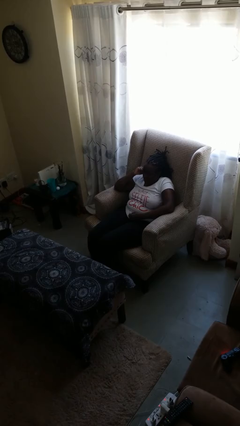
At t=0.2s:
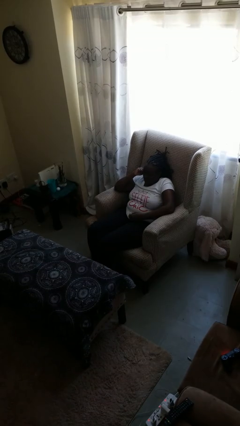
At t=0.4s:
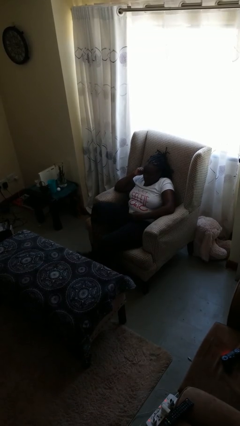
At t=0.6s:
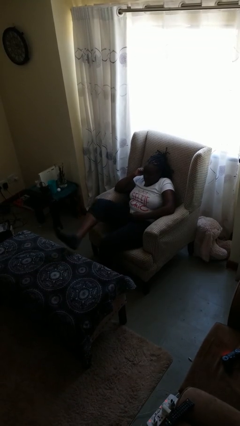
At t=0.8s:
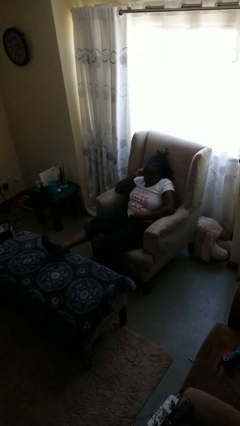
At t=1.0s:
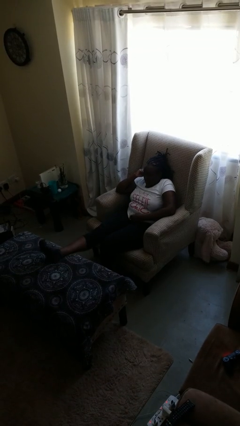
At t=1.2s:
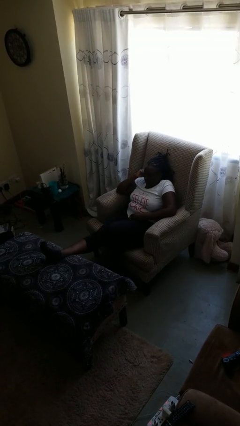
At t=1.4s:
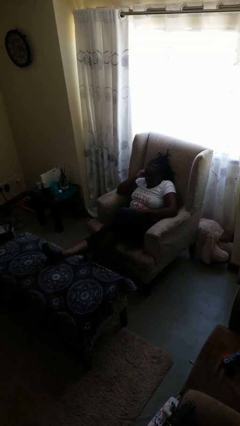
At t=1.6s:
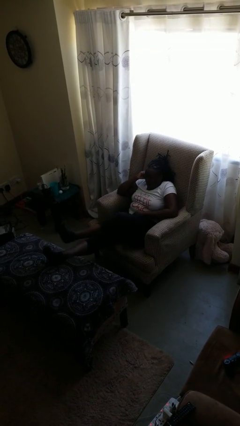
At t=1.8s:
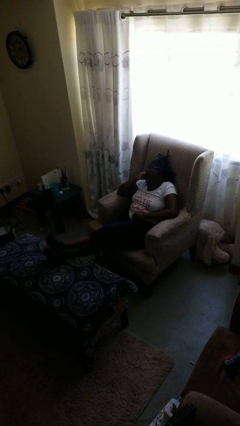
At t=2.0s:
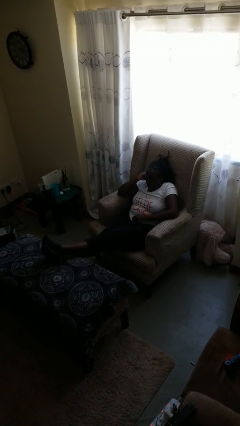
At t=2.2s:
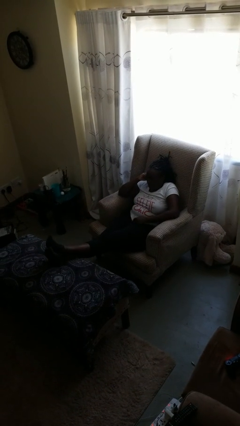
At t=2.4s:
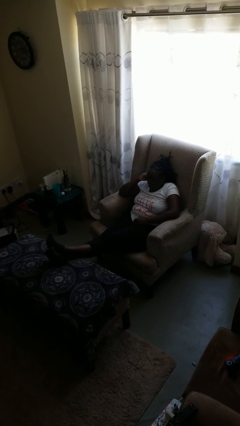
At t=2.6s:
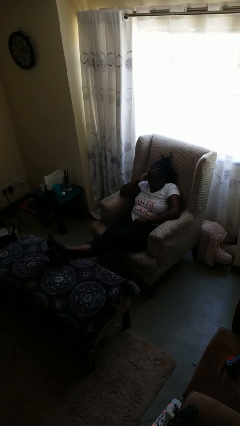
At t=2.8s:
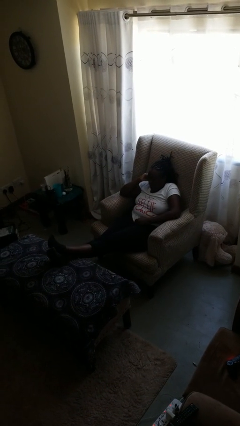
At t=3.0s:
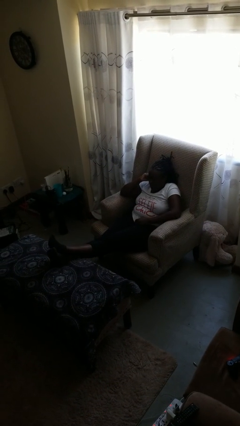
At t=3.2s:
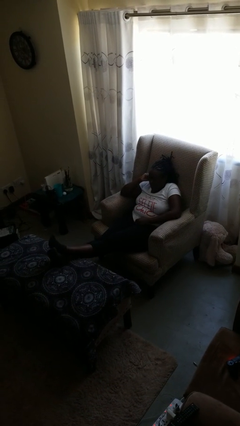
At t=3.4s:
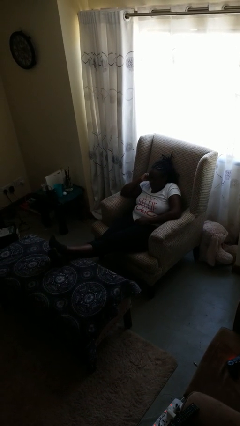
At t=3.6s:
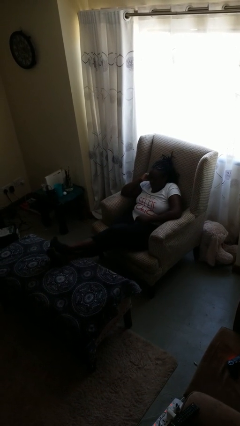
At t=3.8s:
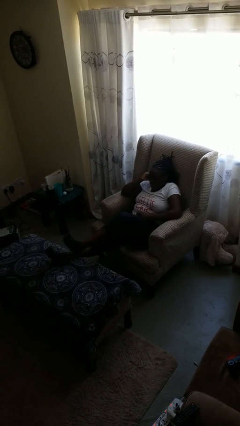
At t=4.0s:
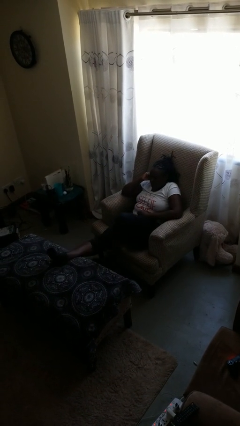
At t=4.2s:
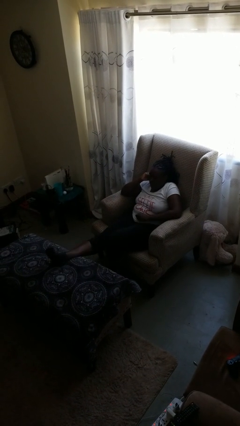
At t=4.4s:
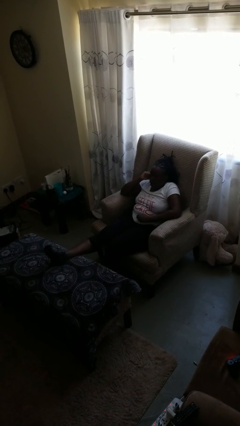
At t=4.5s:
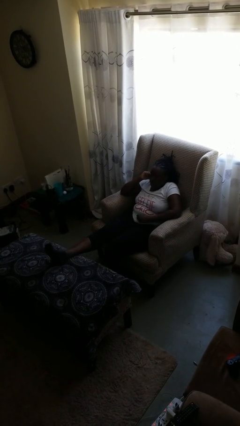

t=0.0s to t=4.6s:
person puts feet up

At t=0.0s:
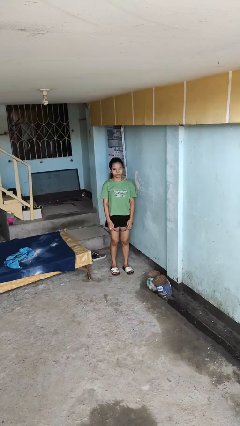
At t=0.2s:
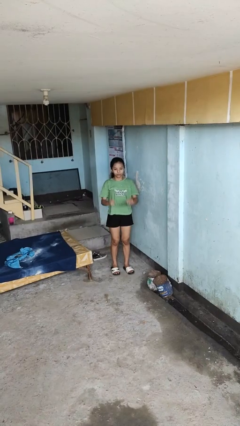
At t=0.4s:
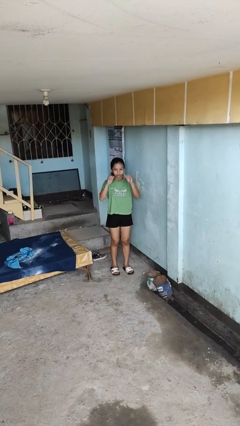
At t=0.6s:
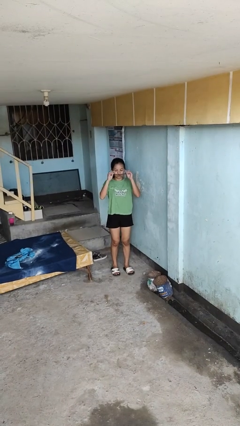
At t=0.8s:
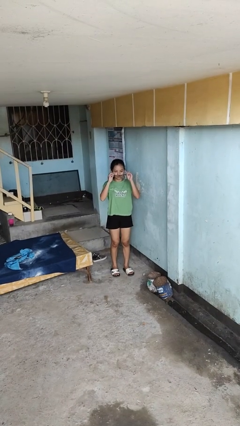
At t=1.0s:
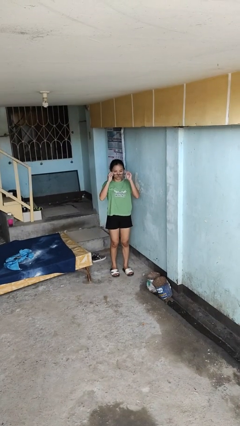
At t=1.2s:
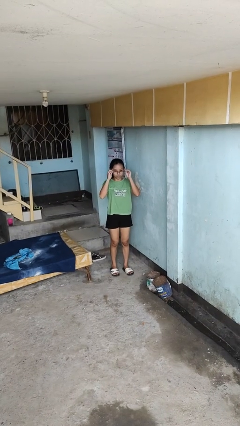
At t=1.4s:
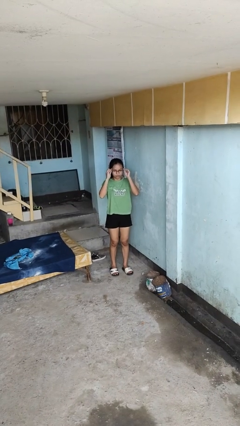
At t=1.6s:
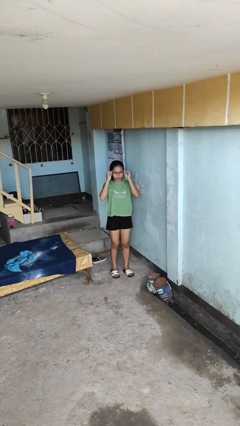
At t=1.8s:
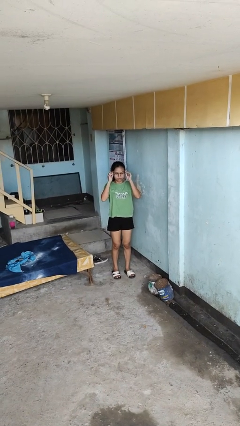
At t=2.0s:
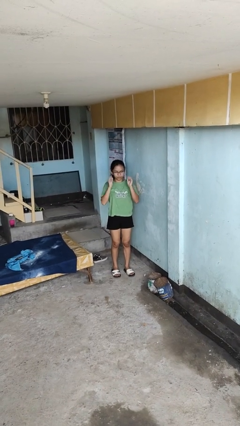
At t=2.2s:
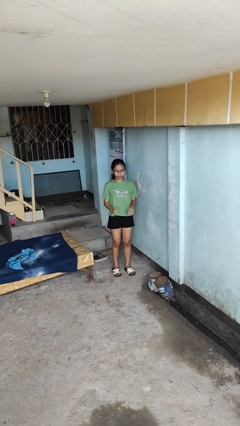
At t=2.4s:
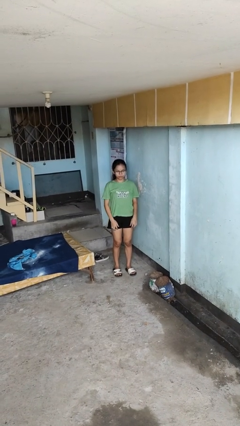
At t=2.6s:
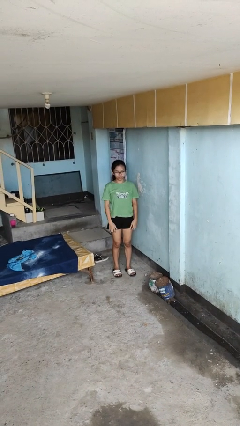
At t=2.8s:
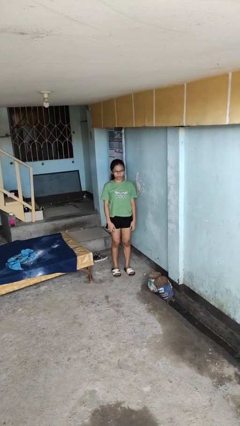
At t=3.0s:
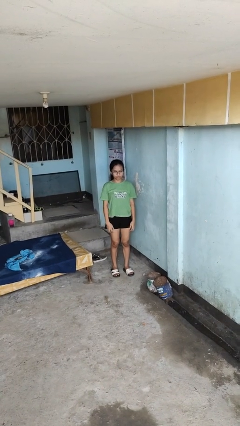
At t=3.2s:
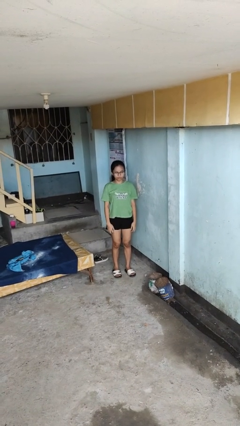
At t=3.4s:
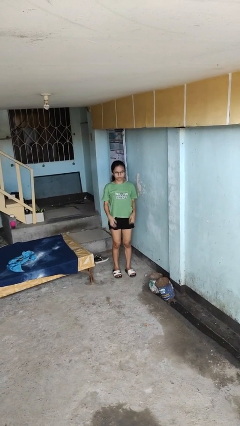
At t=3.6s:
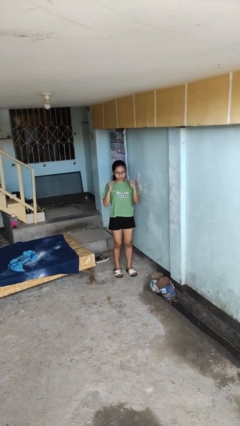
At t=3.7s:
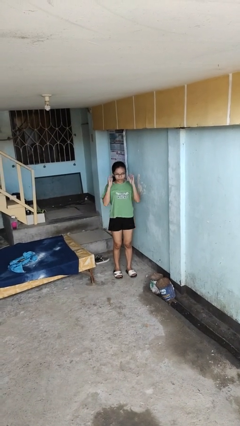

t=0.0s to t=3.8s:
person puts on glasses

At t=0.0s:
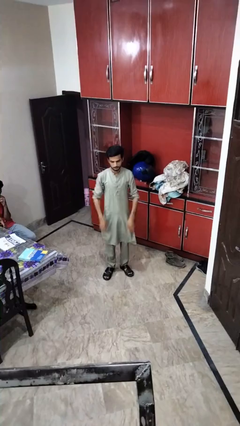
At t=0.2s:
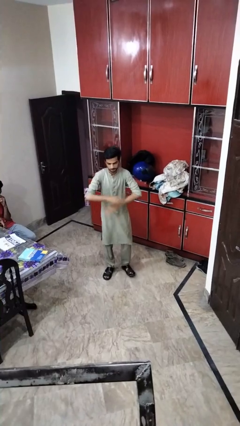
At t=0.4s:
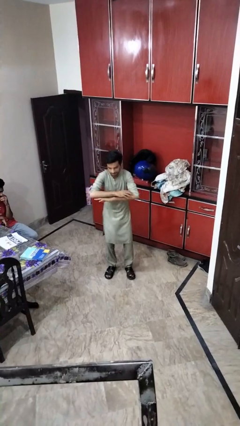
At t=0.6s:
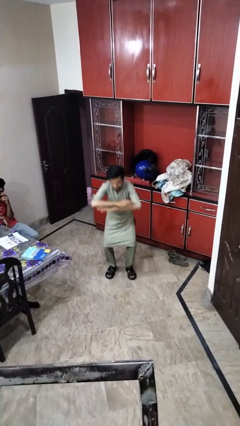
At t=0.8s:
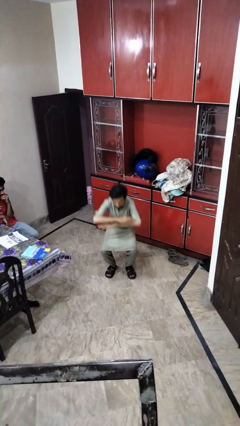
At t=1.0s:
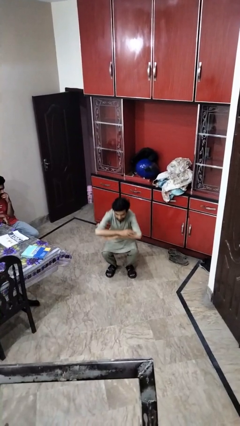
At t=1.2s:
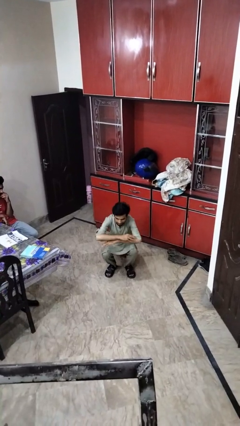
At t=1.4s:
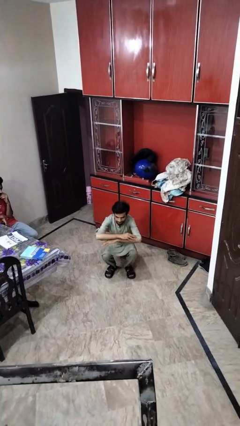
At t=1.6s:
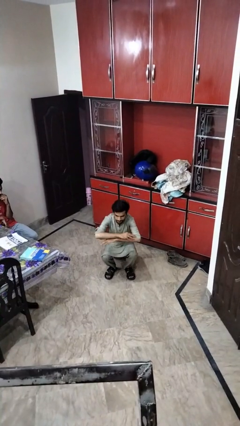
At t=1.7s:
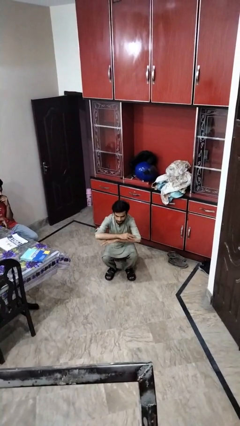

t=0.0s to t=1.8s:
person squats

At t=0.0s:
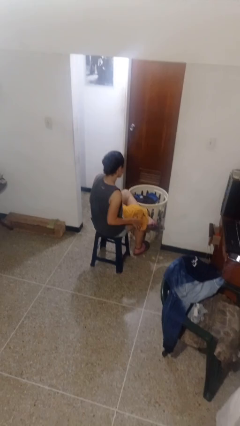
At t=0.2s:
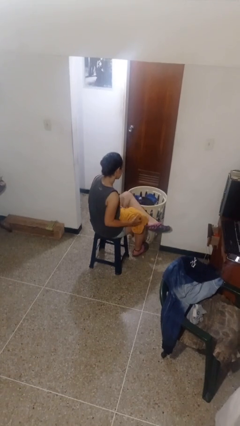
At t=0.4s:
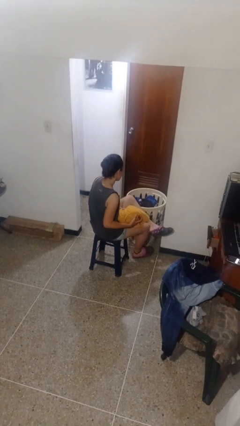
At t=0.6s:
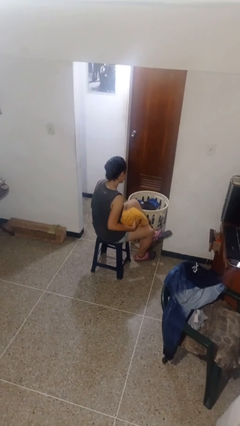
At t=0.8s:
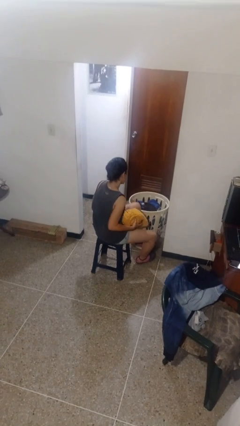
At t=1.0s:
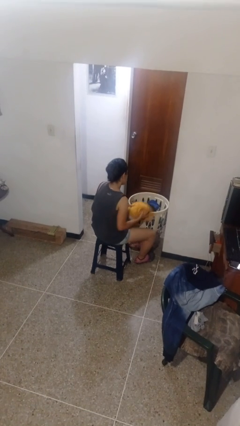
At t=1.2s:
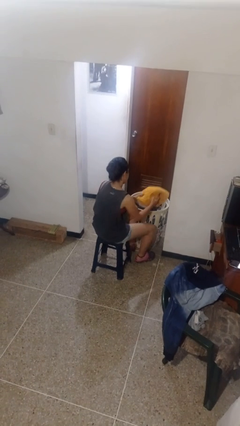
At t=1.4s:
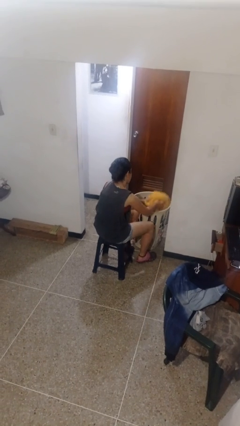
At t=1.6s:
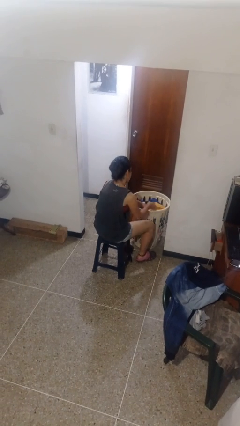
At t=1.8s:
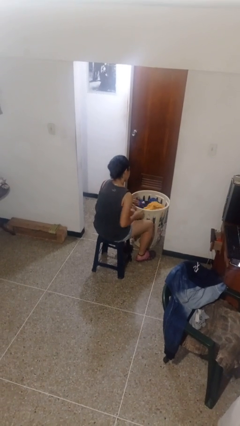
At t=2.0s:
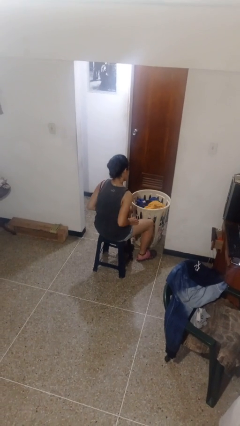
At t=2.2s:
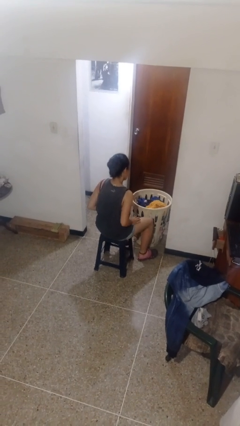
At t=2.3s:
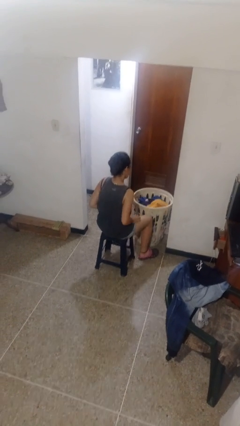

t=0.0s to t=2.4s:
person puts object into basket

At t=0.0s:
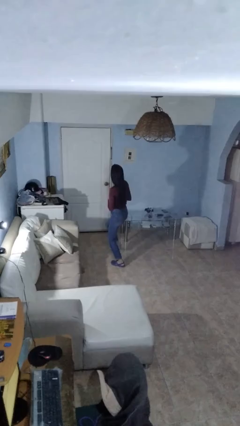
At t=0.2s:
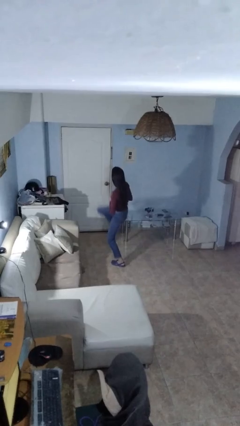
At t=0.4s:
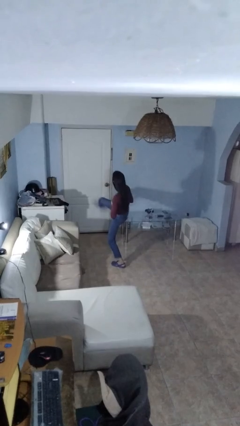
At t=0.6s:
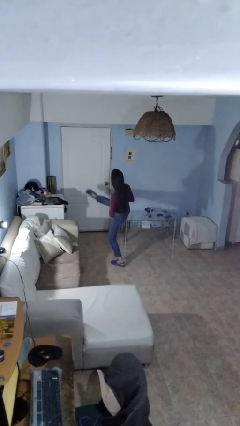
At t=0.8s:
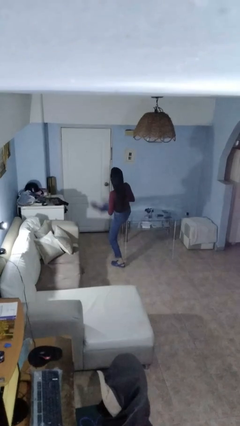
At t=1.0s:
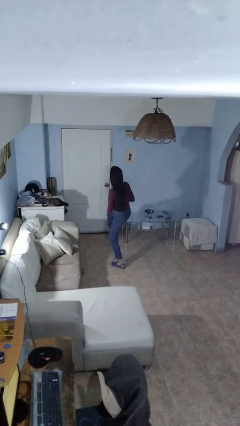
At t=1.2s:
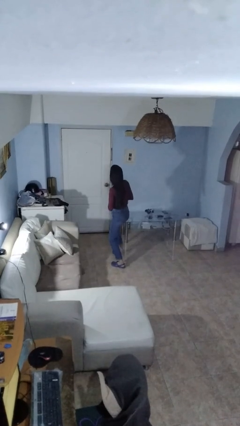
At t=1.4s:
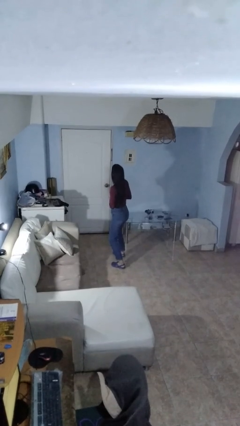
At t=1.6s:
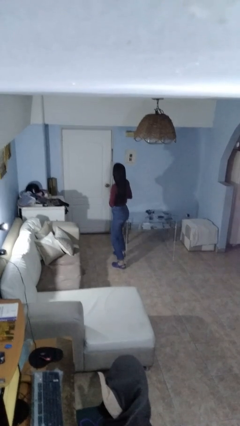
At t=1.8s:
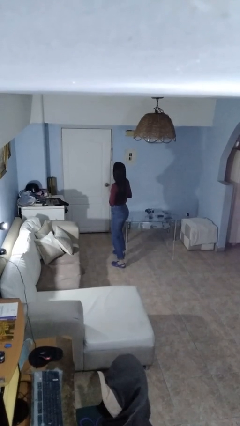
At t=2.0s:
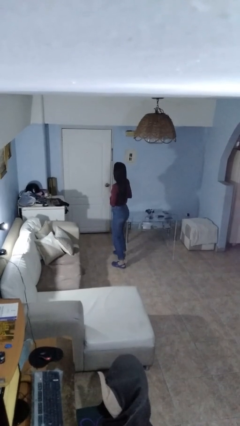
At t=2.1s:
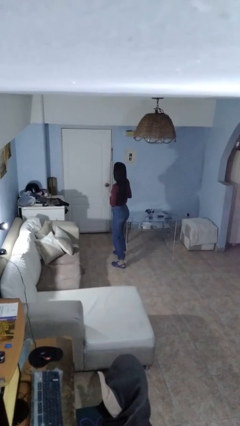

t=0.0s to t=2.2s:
person karate kicks

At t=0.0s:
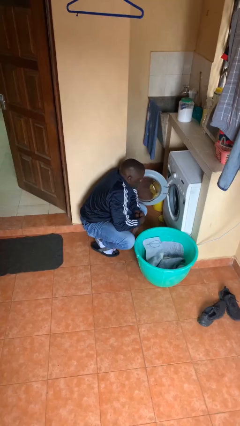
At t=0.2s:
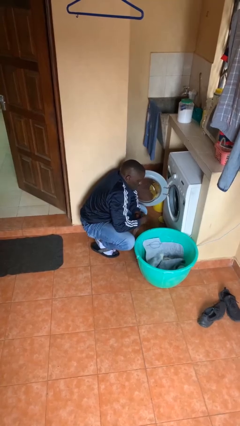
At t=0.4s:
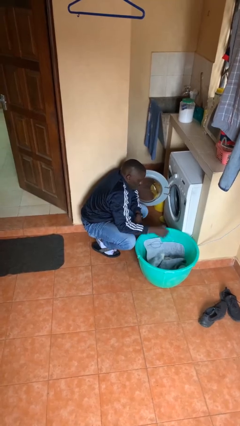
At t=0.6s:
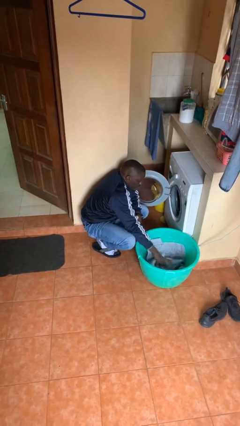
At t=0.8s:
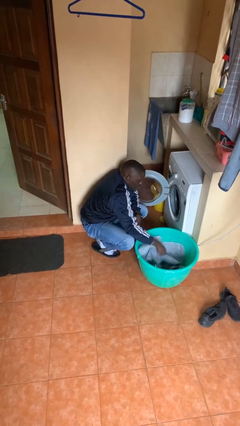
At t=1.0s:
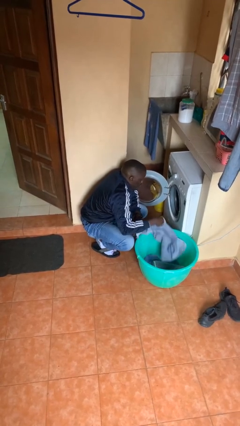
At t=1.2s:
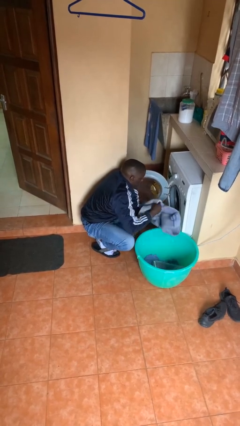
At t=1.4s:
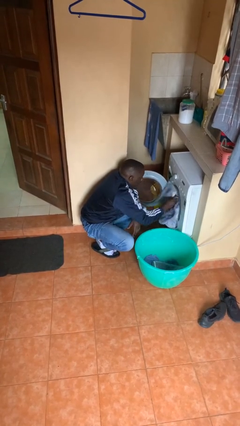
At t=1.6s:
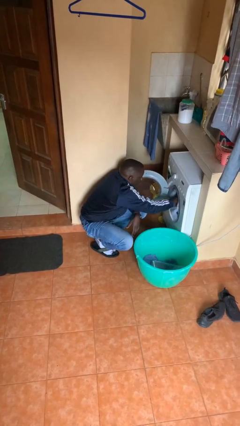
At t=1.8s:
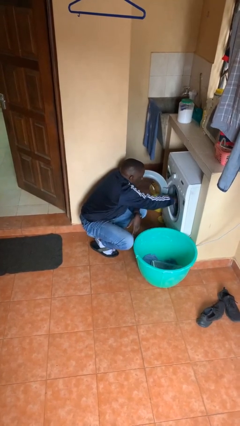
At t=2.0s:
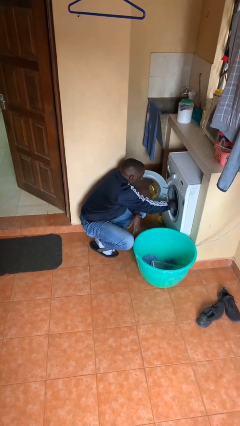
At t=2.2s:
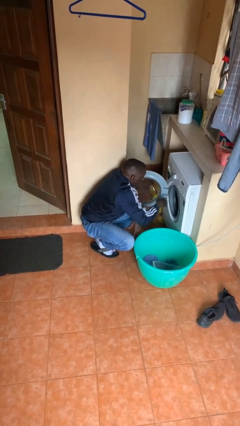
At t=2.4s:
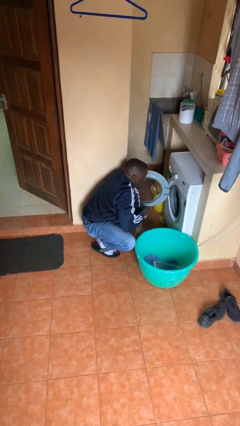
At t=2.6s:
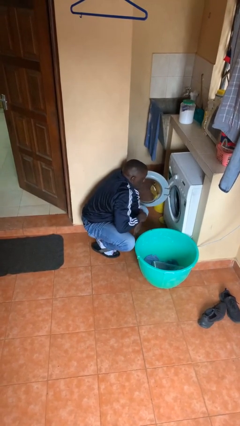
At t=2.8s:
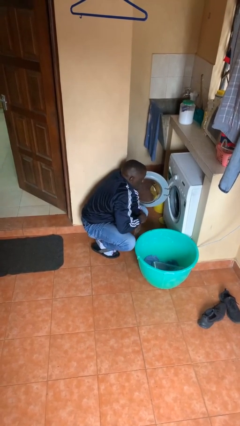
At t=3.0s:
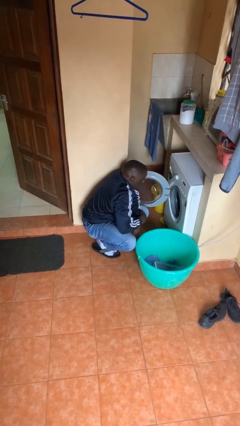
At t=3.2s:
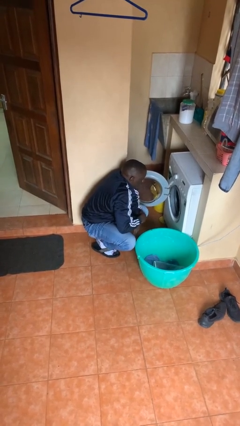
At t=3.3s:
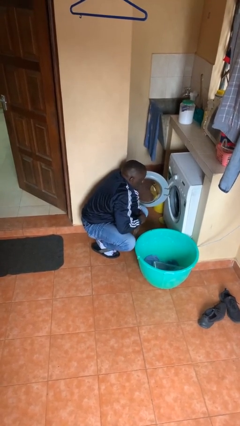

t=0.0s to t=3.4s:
person loads clotheswasher
